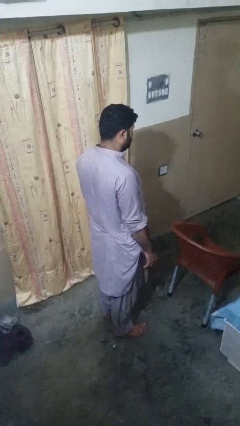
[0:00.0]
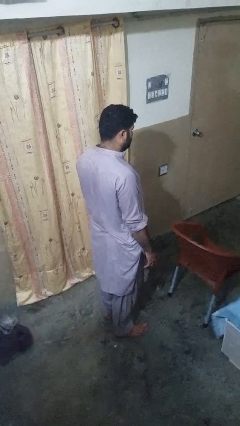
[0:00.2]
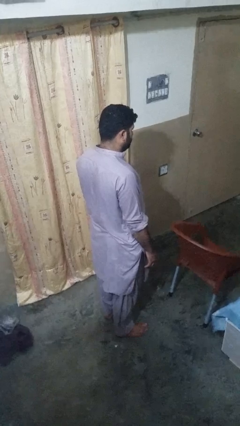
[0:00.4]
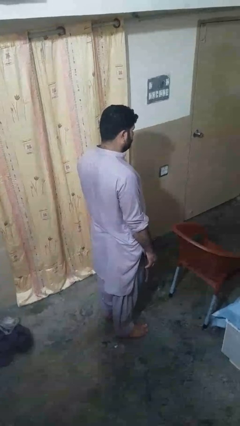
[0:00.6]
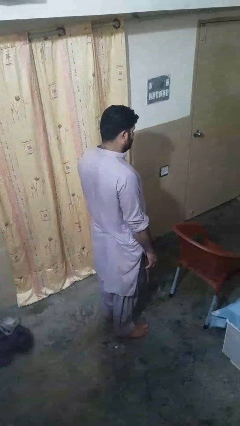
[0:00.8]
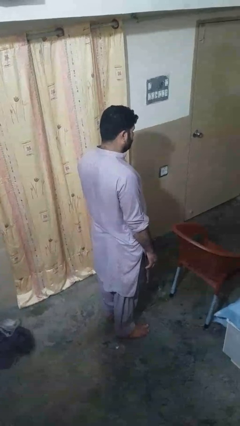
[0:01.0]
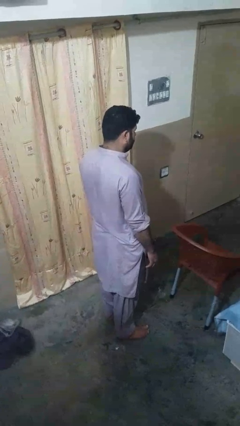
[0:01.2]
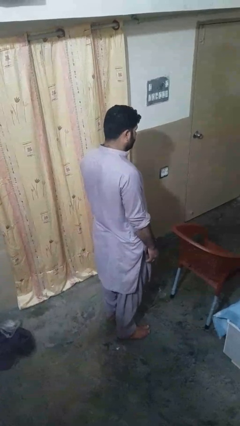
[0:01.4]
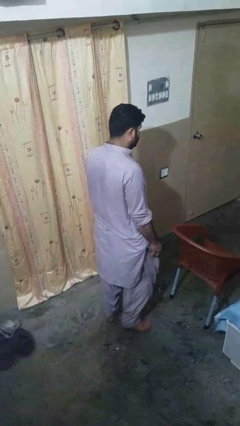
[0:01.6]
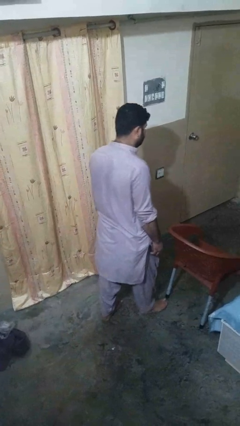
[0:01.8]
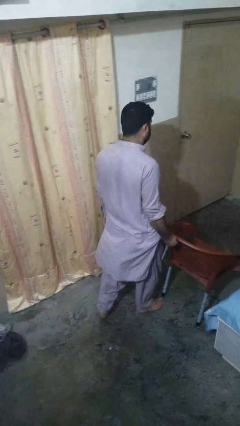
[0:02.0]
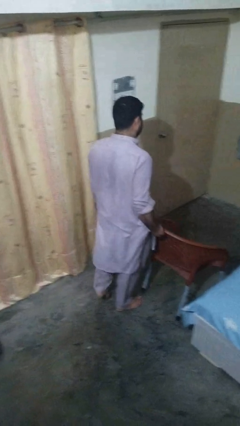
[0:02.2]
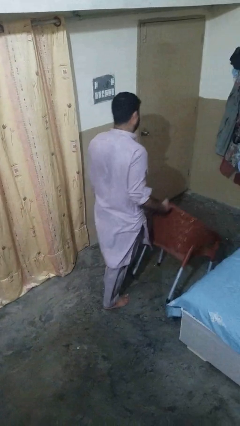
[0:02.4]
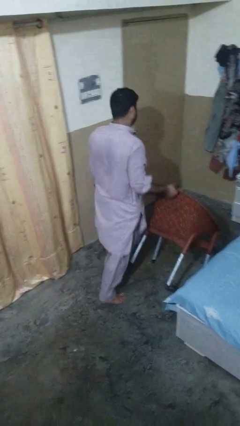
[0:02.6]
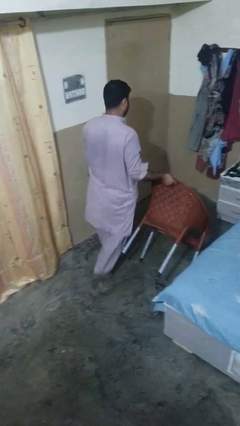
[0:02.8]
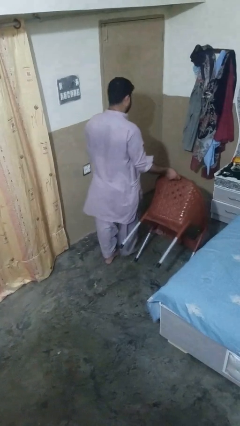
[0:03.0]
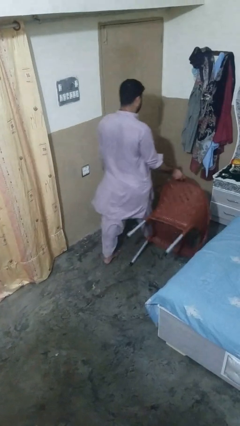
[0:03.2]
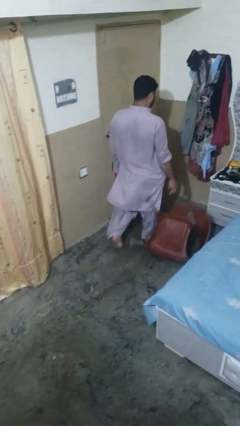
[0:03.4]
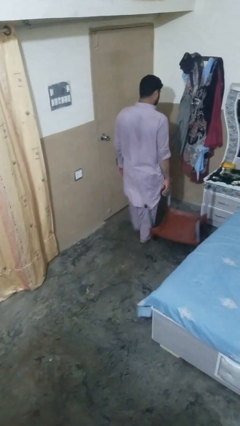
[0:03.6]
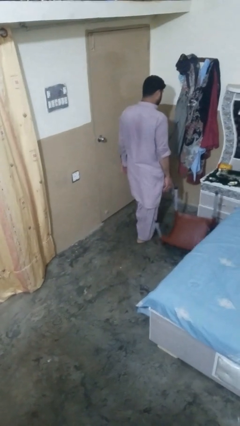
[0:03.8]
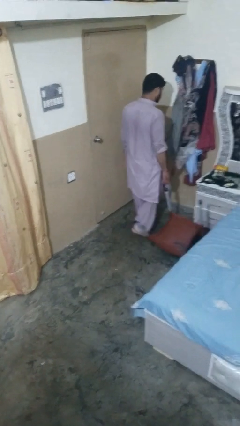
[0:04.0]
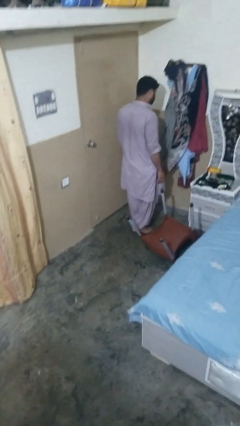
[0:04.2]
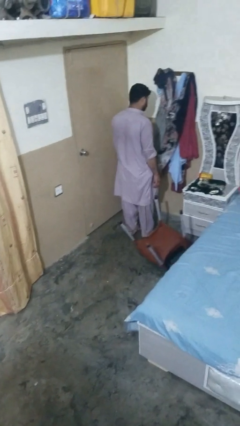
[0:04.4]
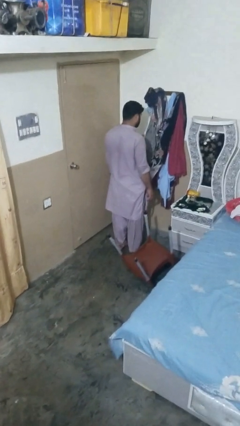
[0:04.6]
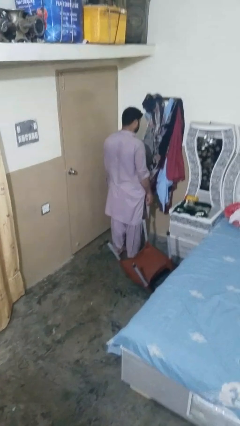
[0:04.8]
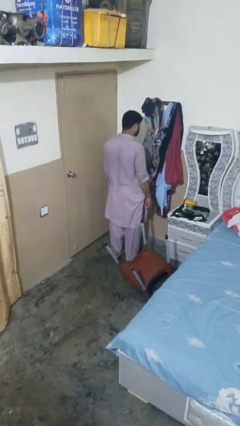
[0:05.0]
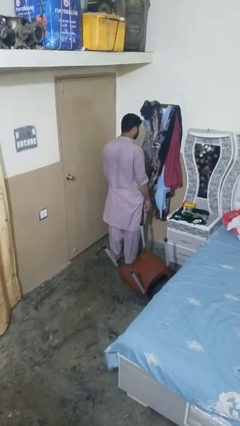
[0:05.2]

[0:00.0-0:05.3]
person knocks over furniture

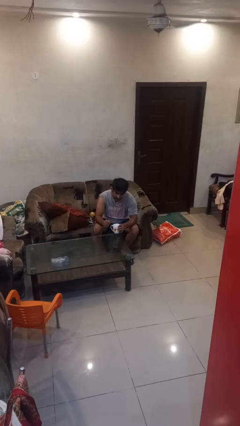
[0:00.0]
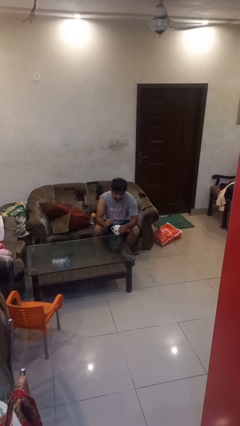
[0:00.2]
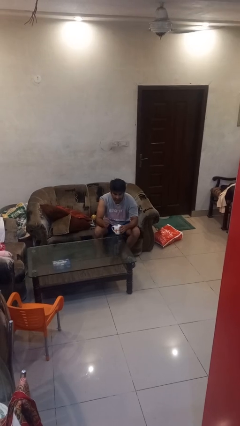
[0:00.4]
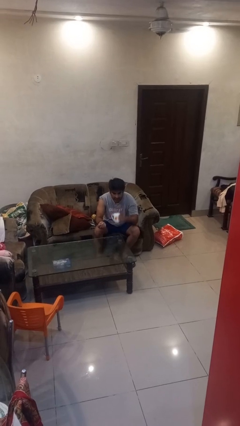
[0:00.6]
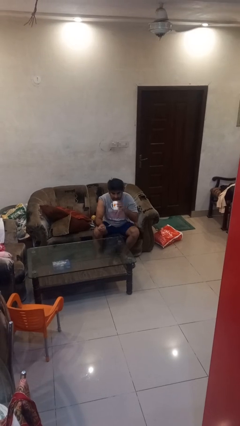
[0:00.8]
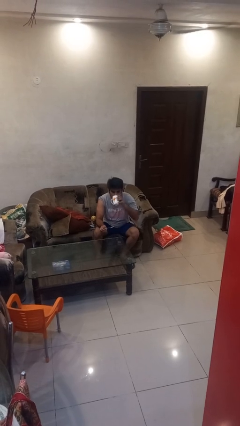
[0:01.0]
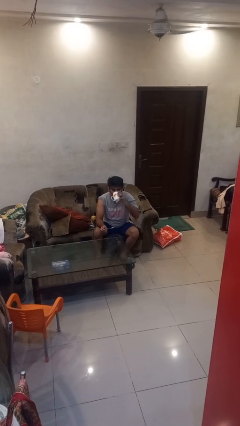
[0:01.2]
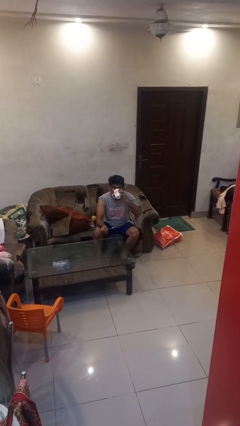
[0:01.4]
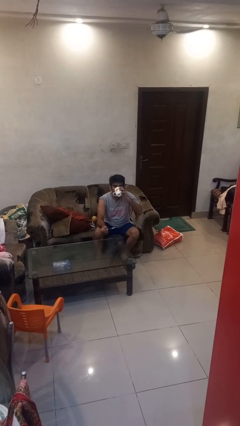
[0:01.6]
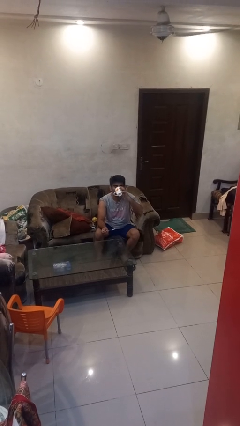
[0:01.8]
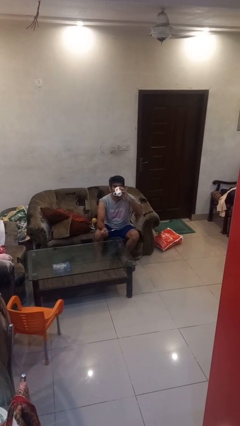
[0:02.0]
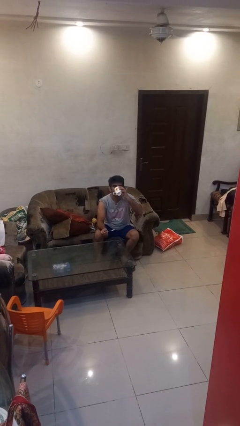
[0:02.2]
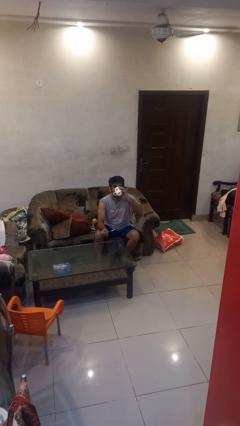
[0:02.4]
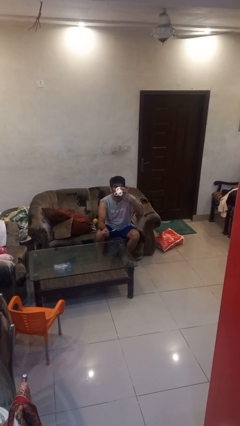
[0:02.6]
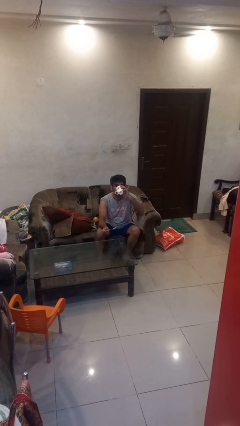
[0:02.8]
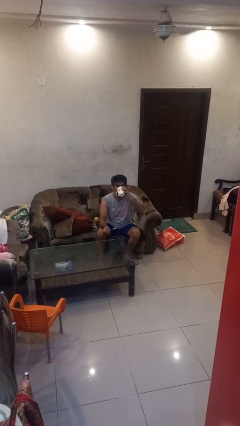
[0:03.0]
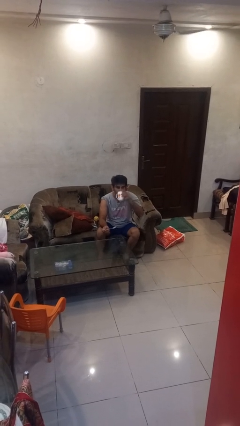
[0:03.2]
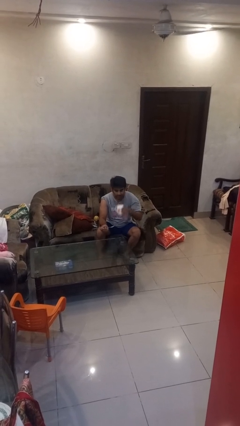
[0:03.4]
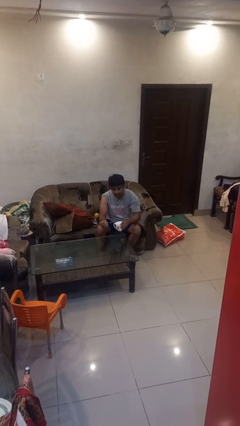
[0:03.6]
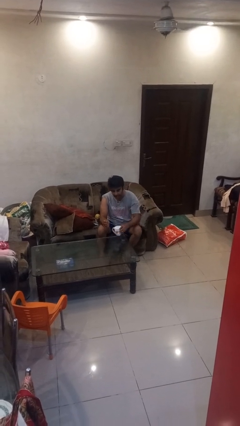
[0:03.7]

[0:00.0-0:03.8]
person drinks from mug

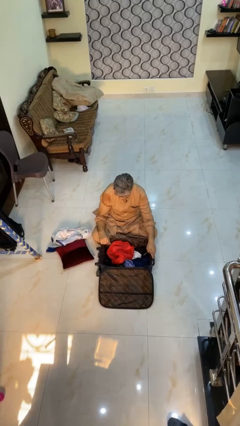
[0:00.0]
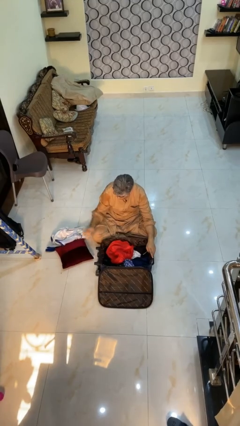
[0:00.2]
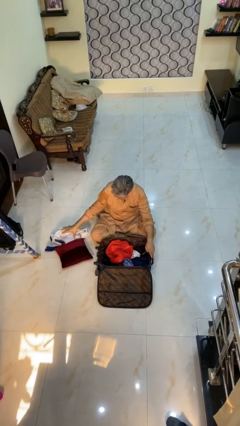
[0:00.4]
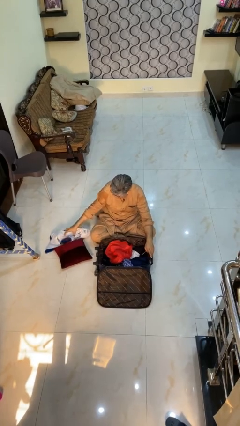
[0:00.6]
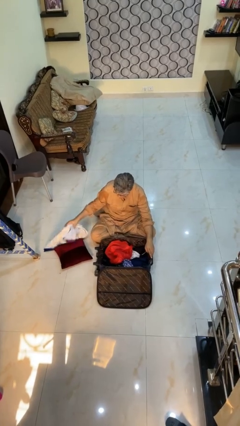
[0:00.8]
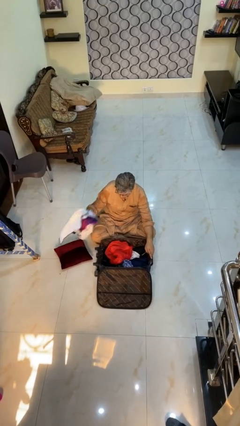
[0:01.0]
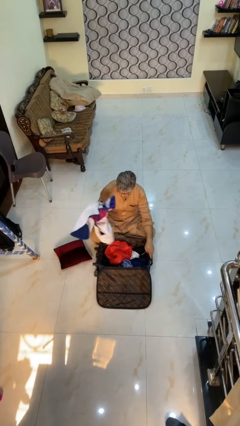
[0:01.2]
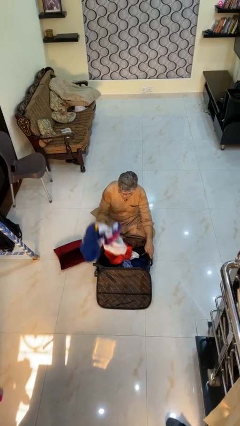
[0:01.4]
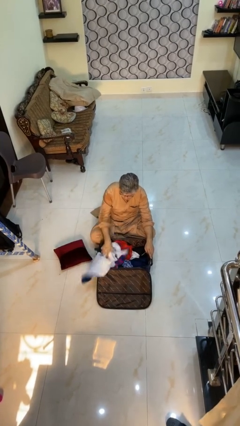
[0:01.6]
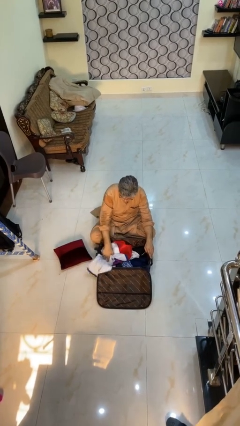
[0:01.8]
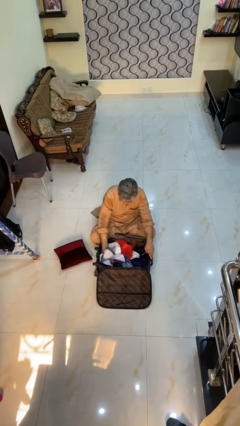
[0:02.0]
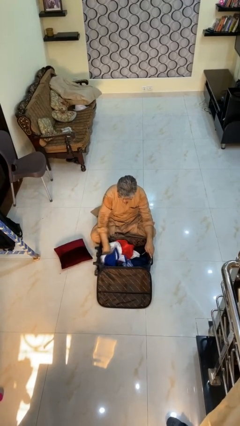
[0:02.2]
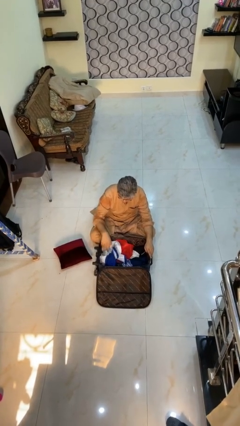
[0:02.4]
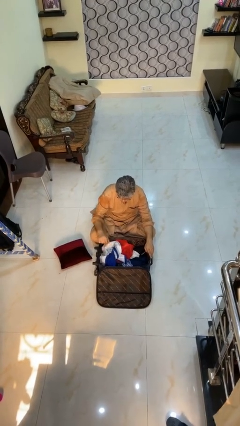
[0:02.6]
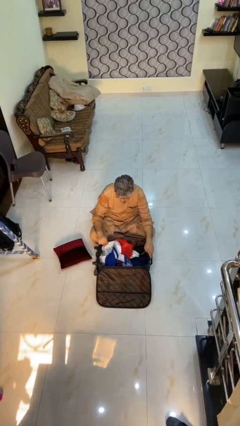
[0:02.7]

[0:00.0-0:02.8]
person loads clothes into suitcase

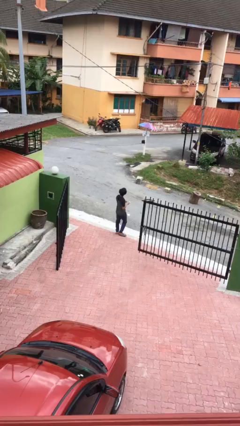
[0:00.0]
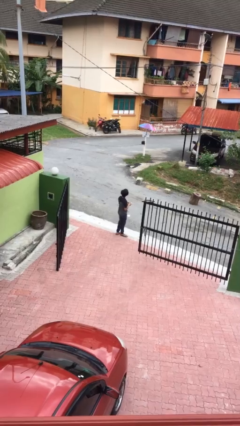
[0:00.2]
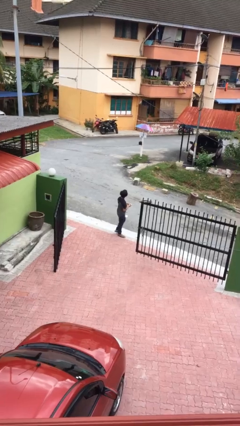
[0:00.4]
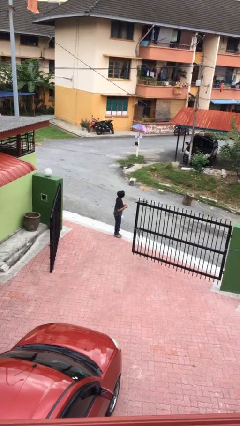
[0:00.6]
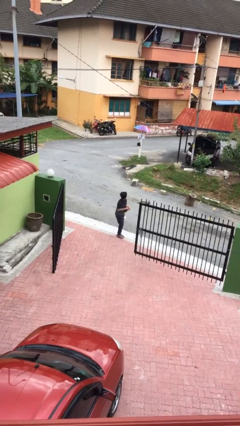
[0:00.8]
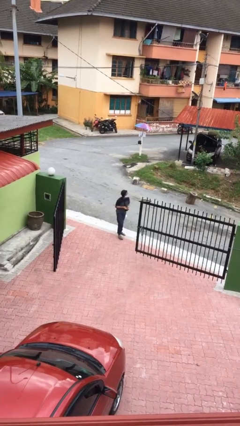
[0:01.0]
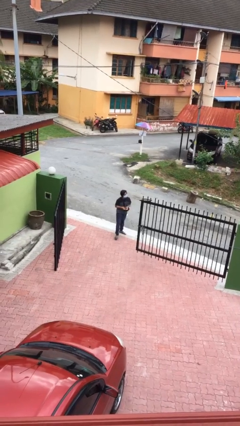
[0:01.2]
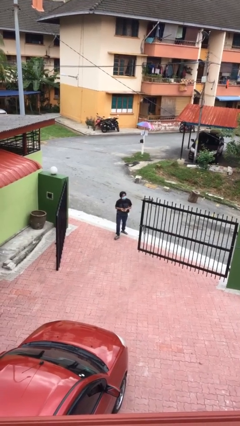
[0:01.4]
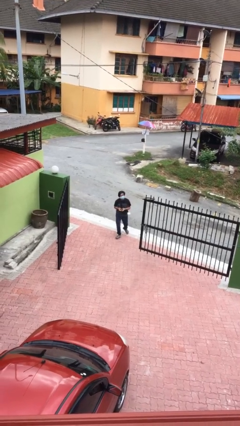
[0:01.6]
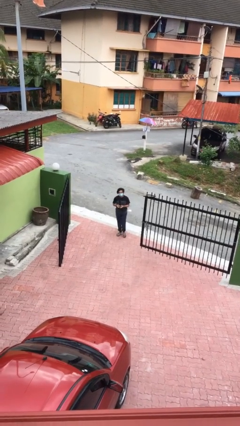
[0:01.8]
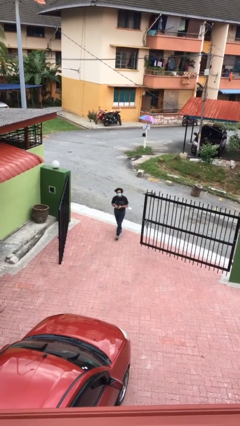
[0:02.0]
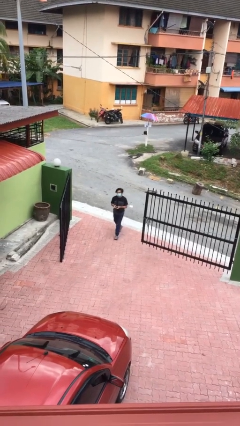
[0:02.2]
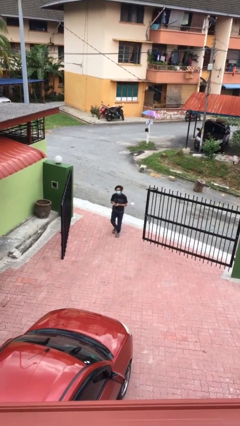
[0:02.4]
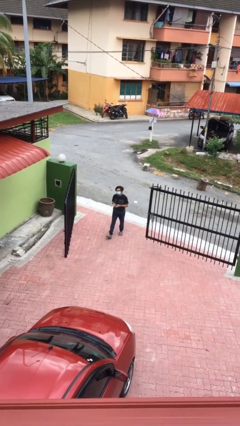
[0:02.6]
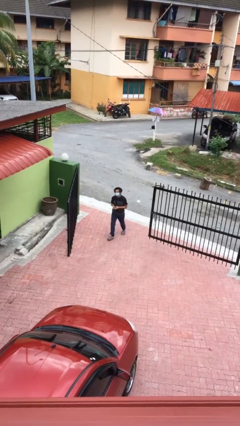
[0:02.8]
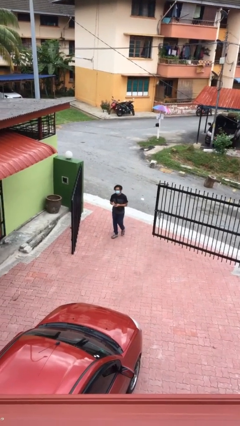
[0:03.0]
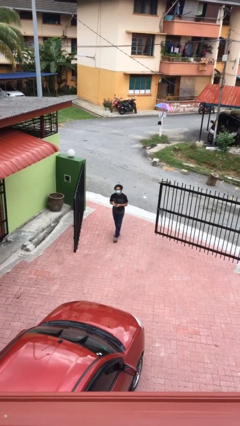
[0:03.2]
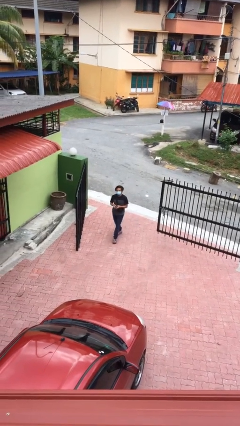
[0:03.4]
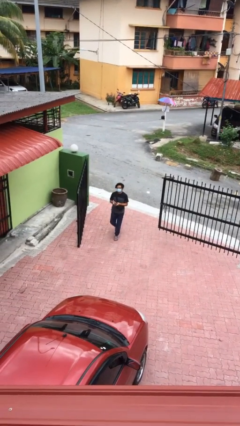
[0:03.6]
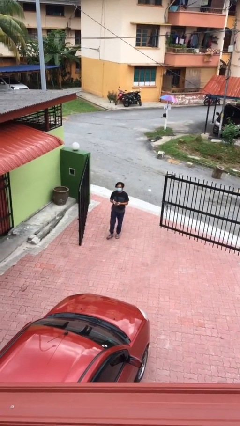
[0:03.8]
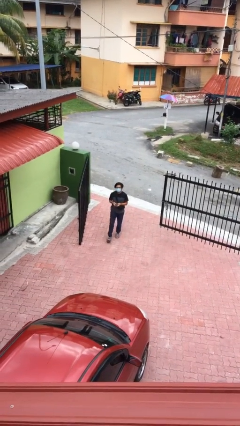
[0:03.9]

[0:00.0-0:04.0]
person enters scene through structure

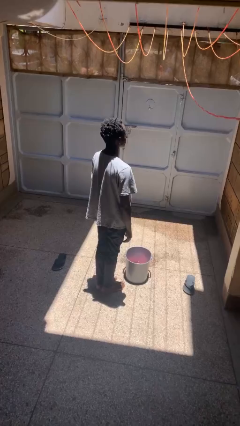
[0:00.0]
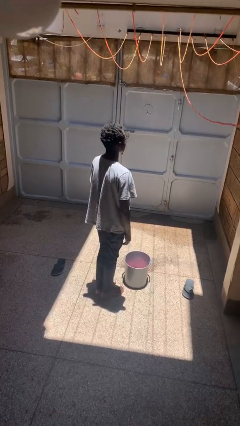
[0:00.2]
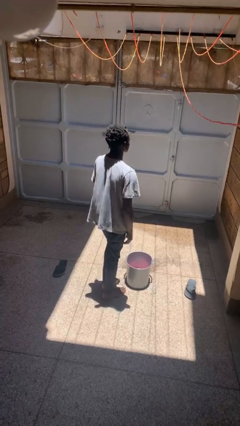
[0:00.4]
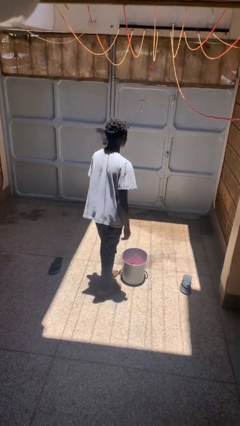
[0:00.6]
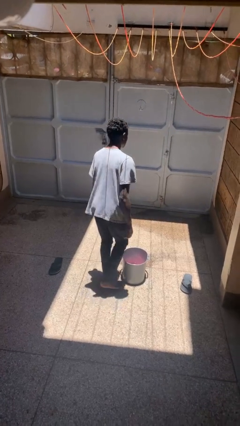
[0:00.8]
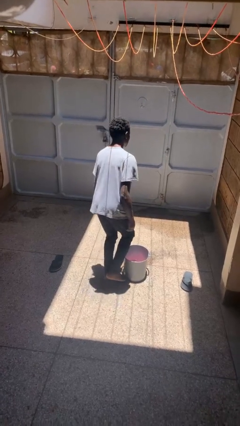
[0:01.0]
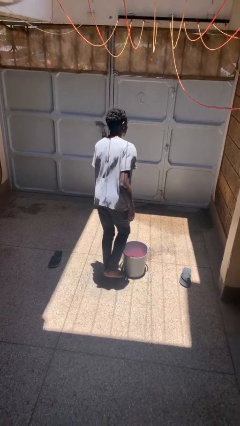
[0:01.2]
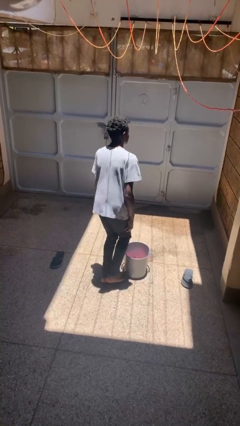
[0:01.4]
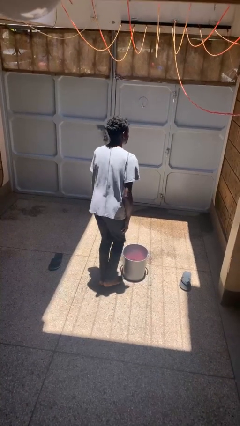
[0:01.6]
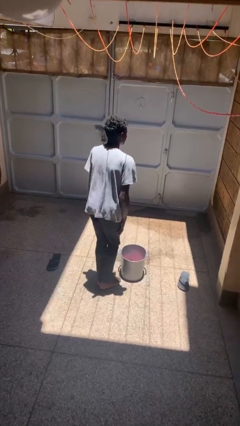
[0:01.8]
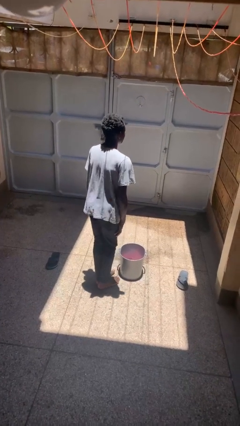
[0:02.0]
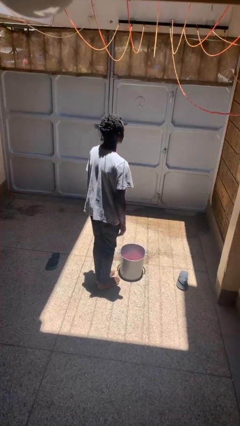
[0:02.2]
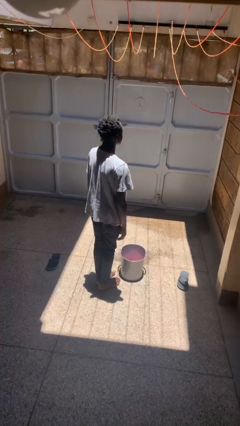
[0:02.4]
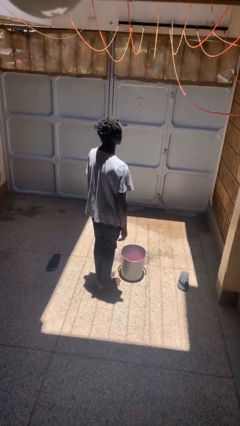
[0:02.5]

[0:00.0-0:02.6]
person stubs toe
